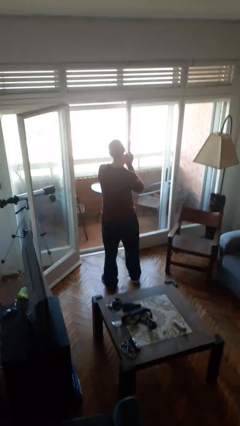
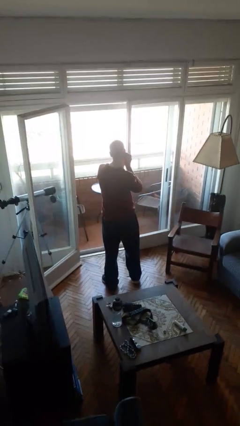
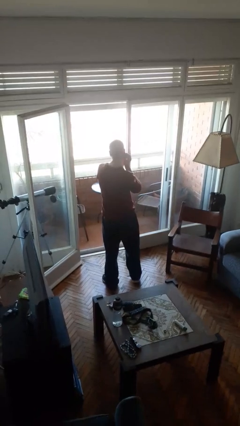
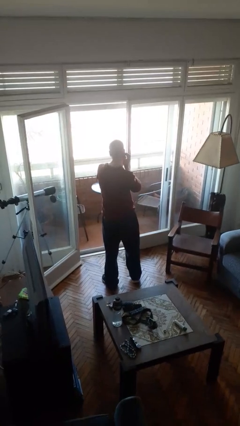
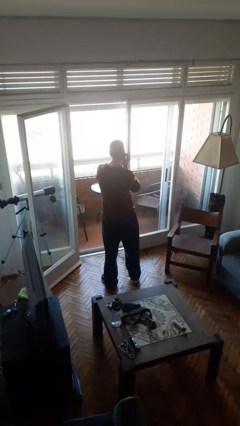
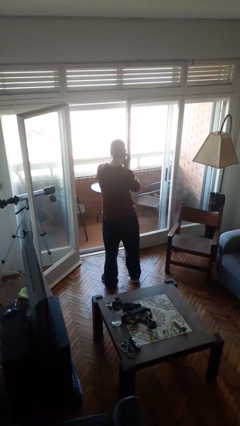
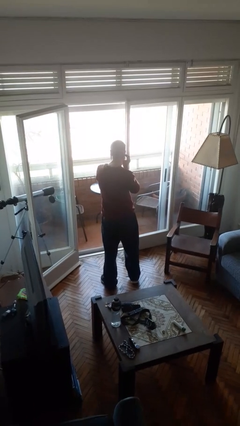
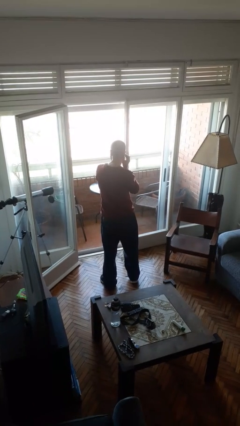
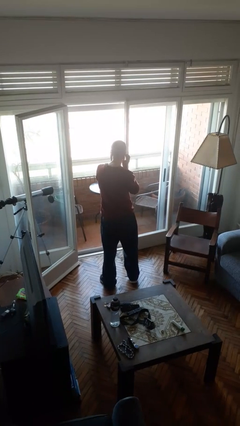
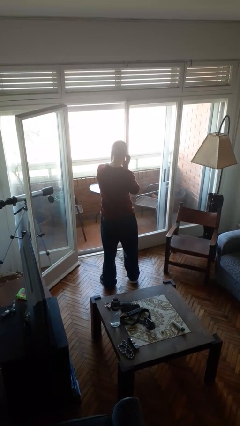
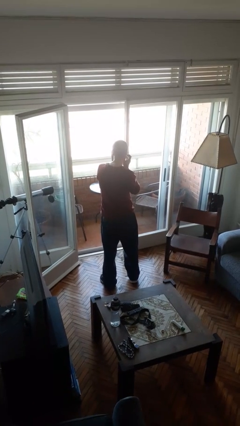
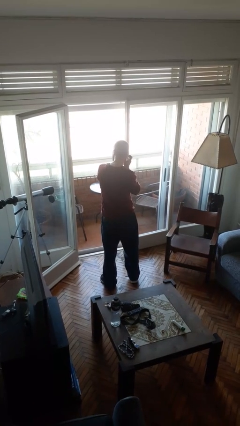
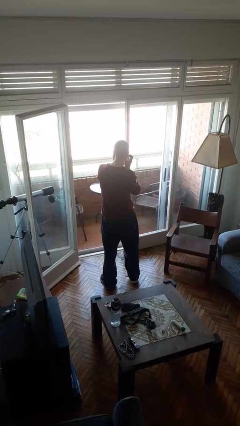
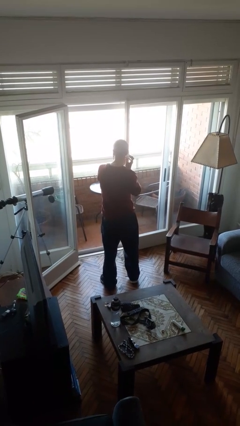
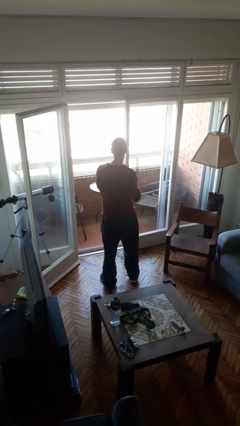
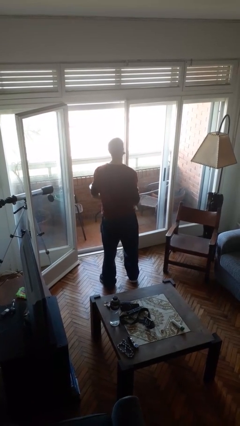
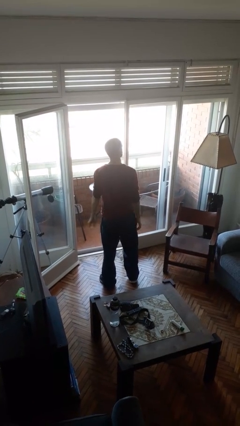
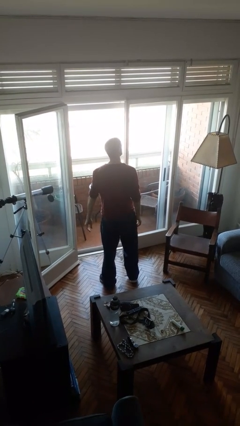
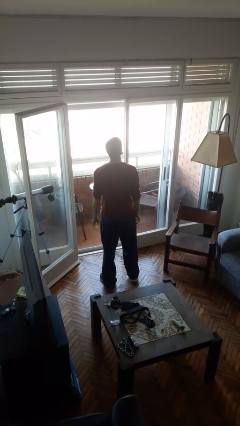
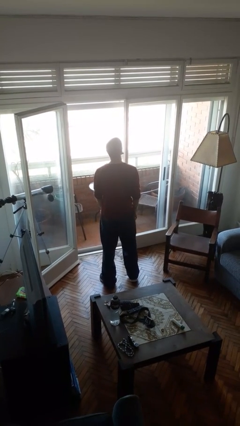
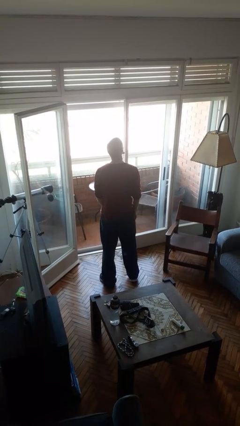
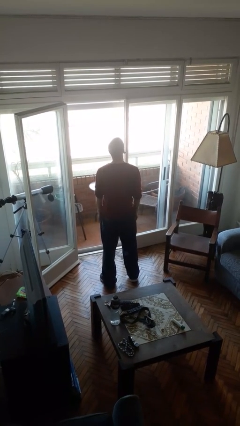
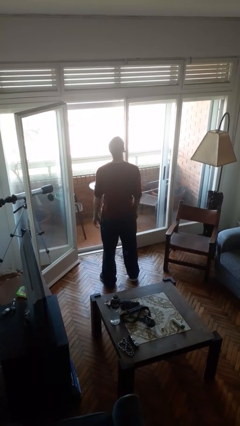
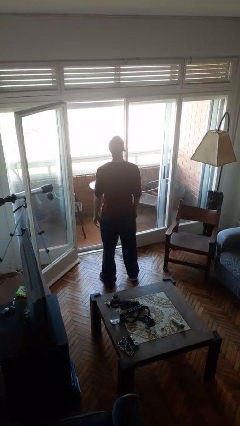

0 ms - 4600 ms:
person puts on earrings

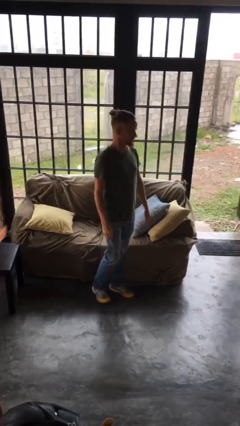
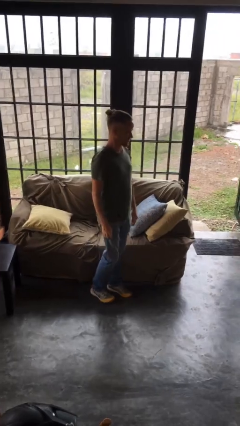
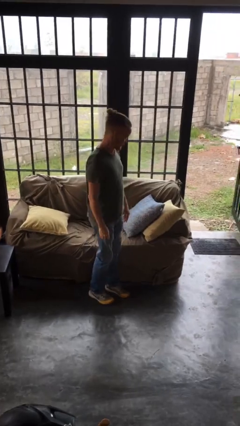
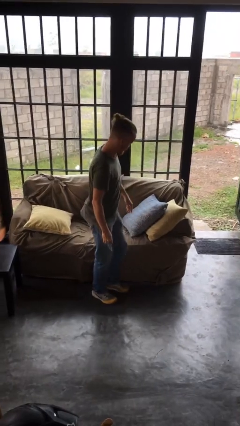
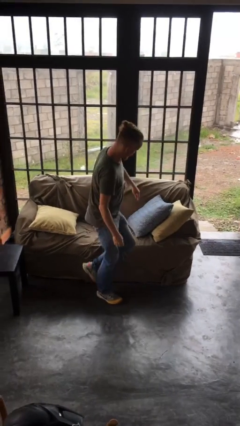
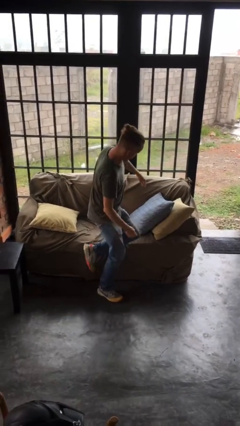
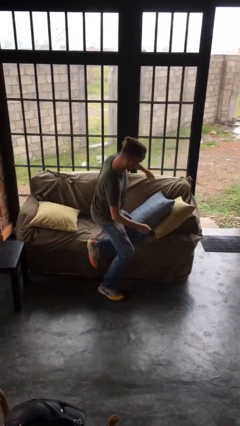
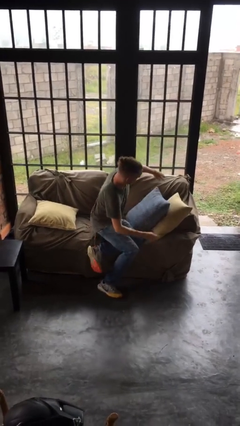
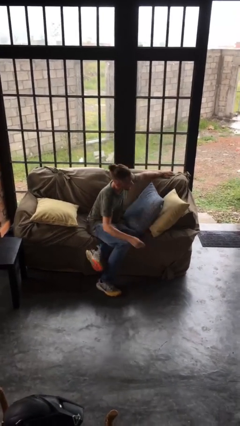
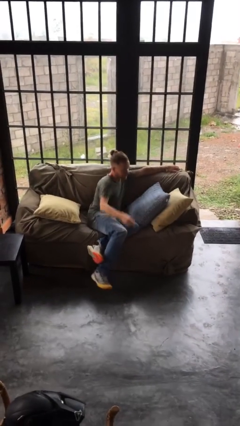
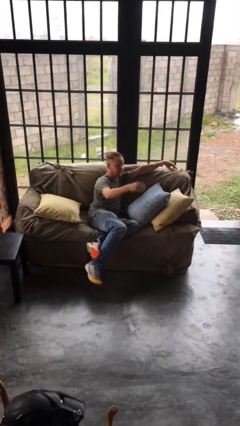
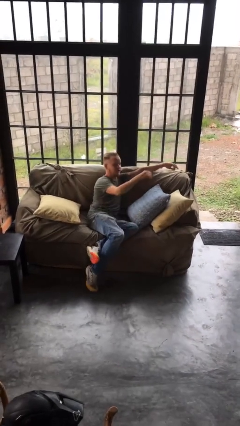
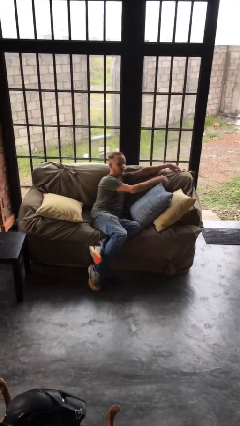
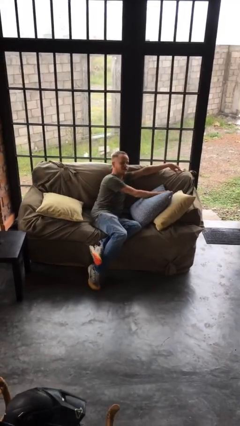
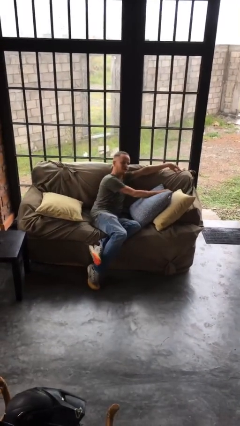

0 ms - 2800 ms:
person lies down on couch

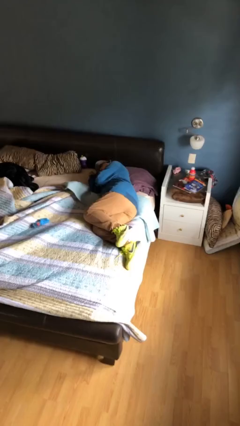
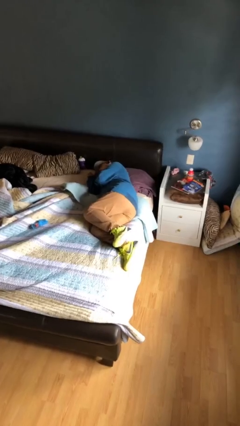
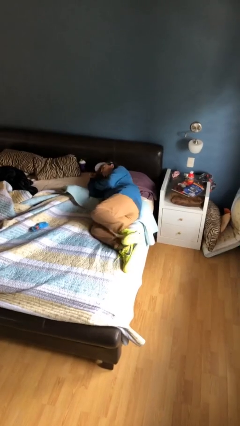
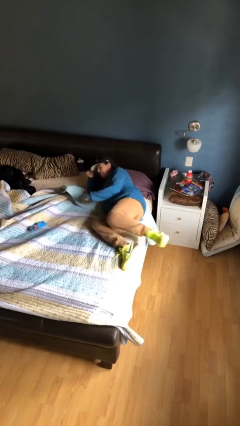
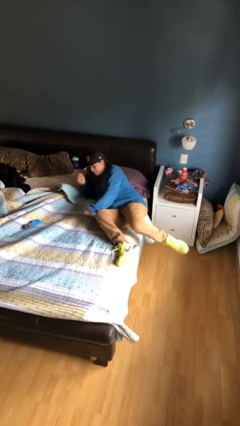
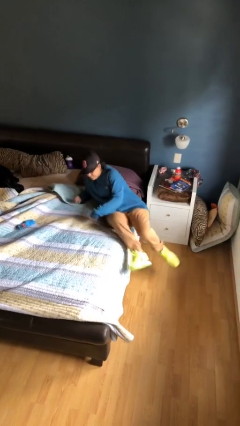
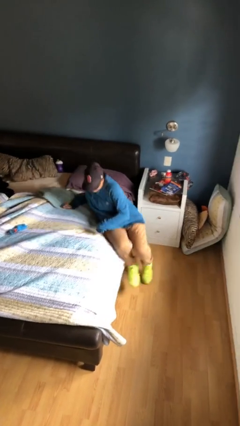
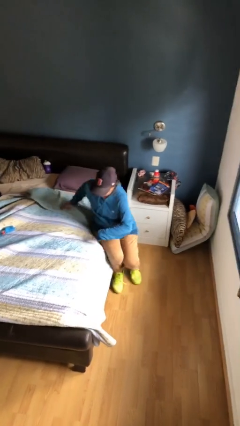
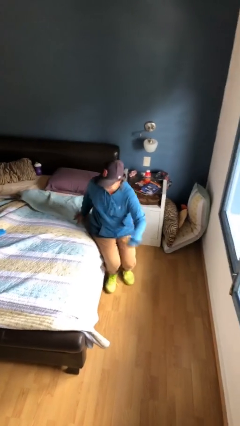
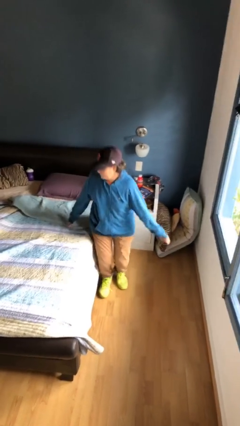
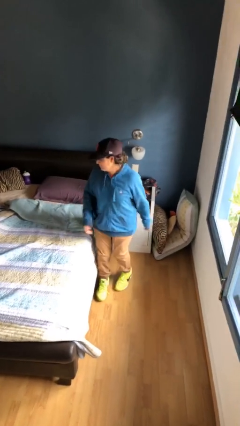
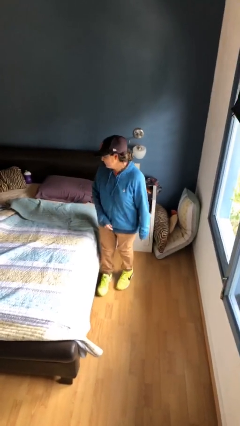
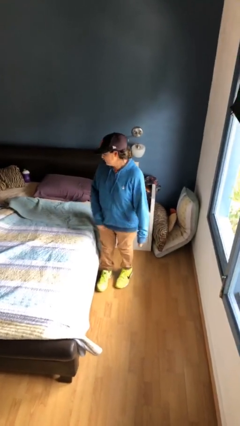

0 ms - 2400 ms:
person stands up

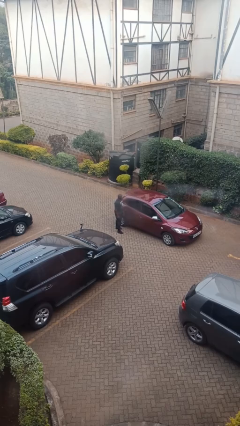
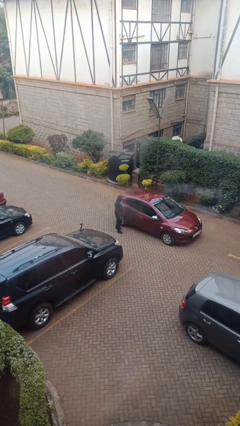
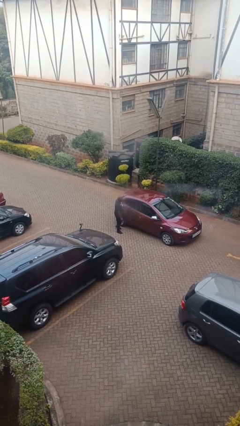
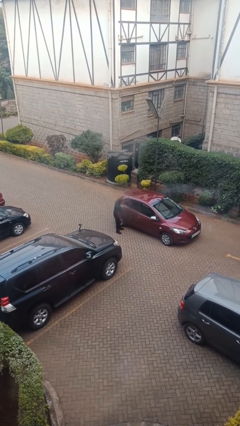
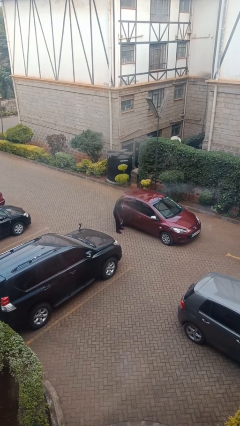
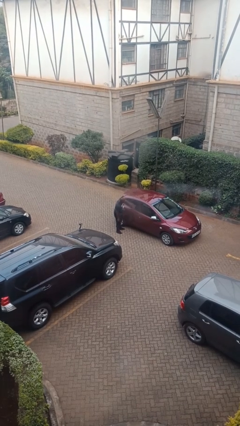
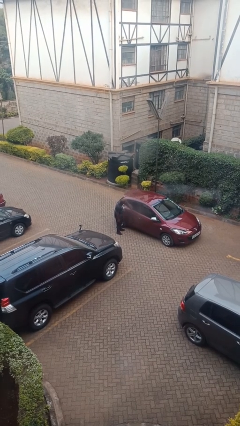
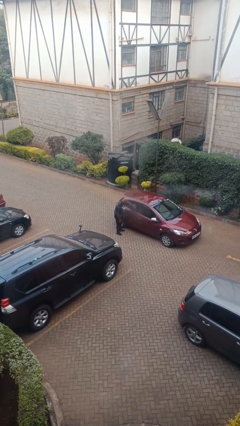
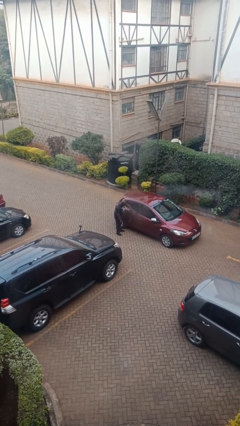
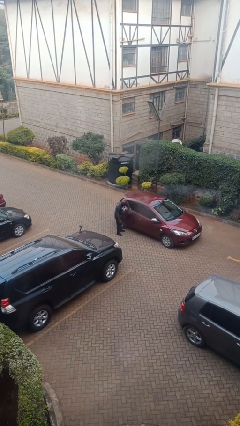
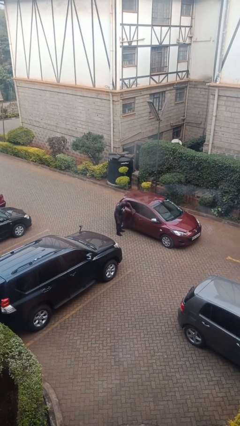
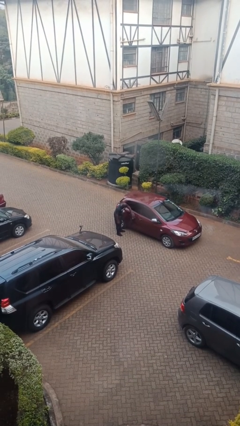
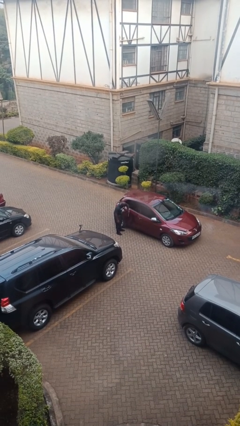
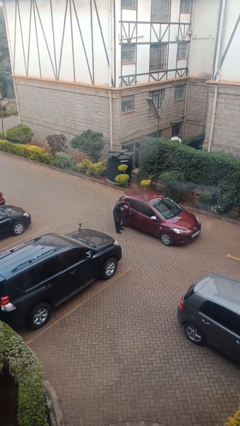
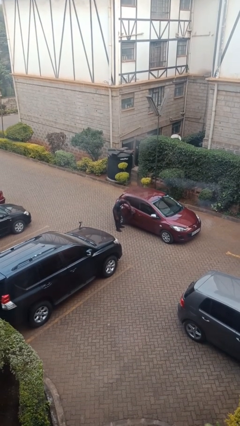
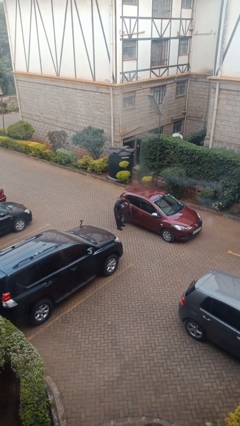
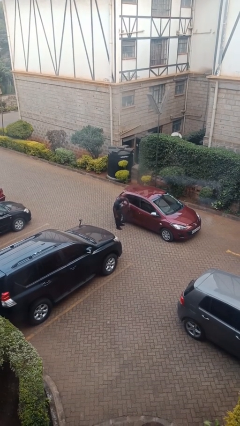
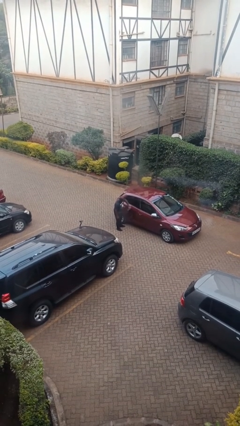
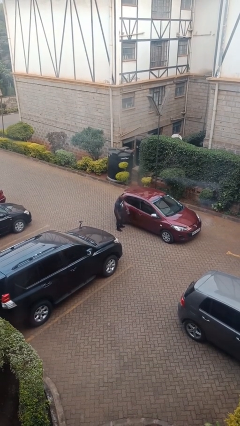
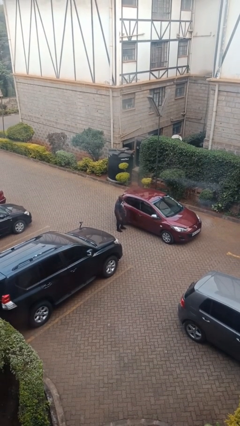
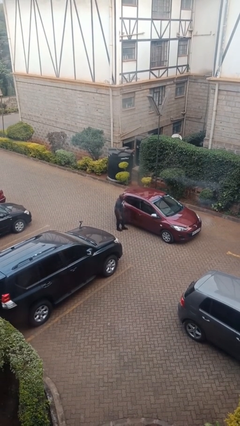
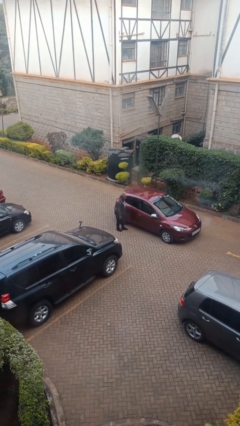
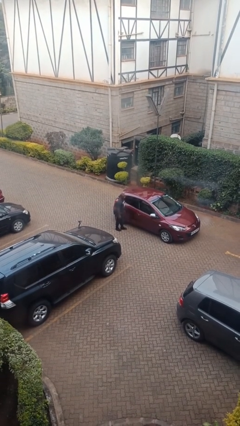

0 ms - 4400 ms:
person polishes car with rag

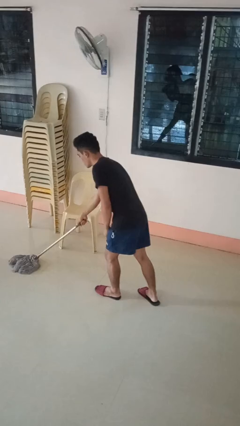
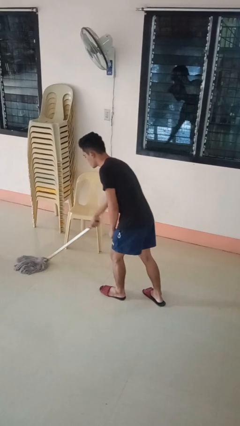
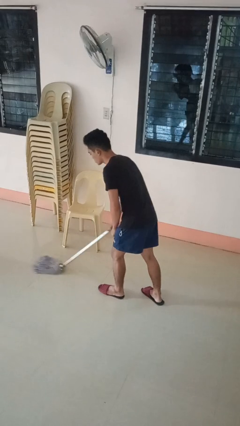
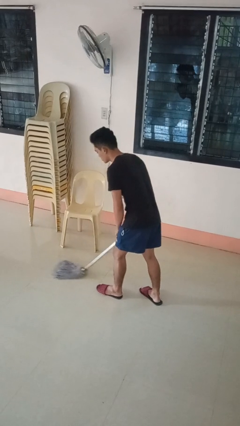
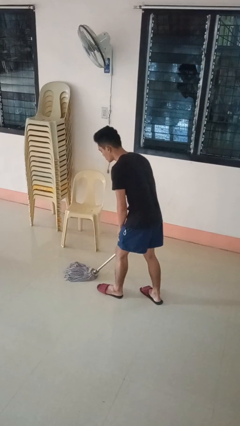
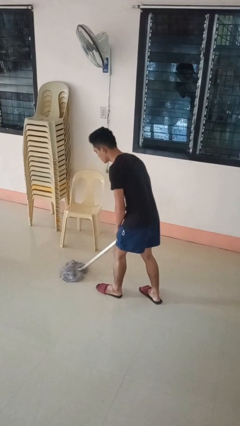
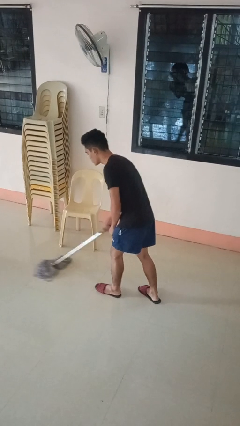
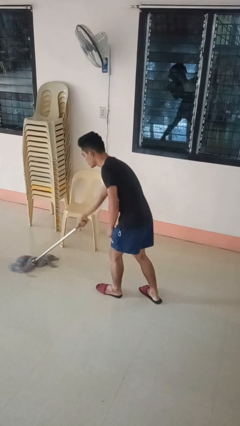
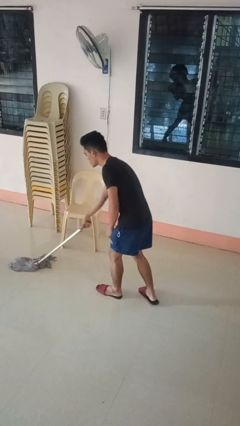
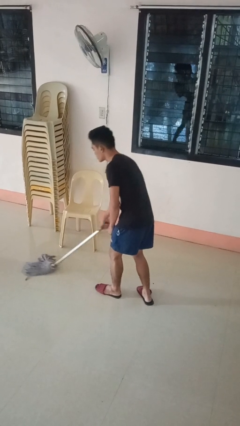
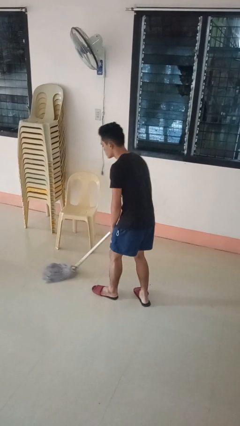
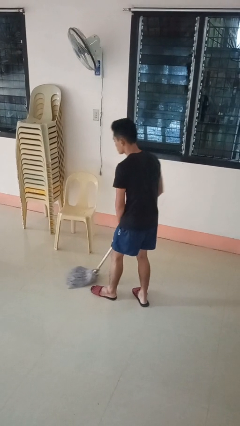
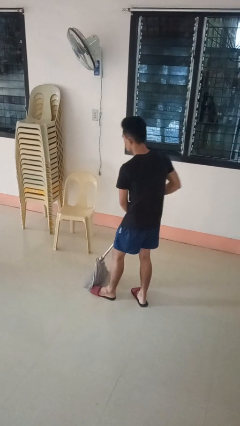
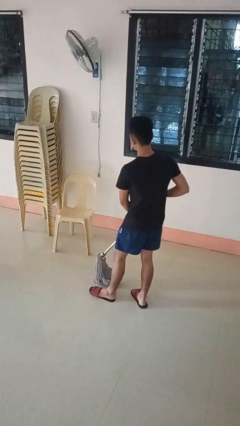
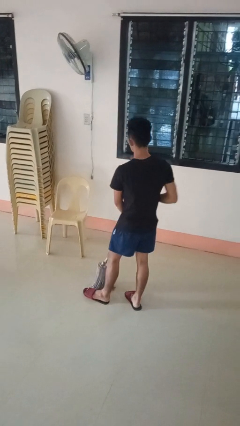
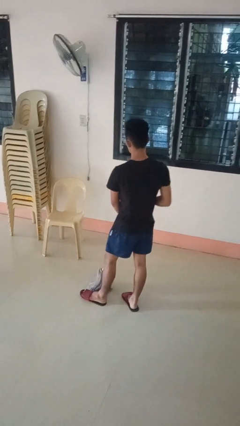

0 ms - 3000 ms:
person mops

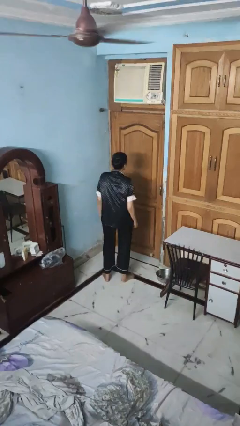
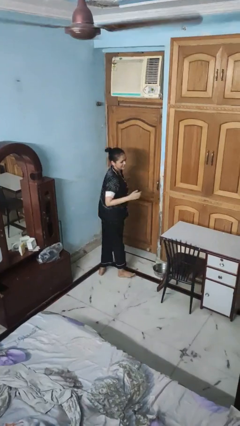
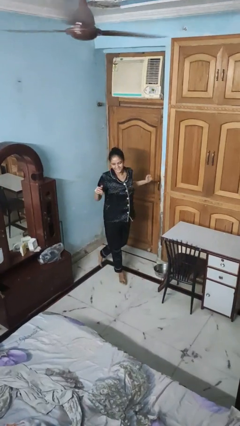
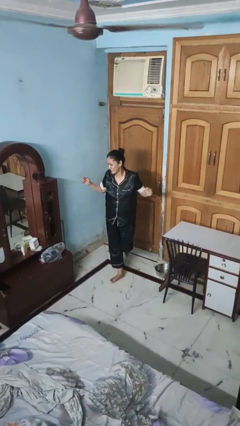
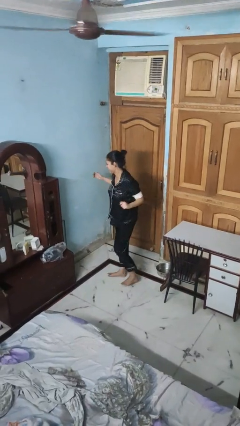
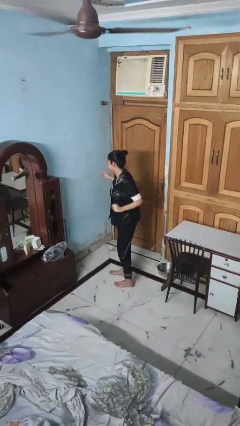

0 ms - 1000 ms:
person twirls
